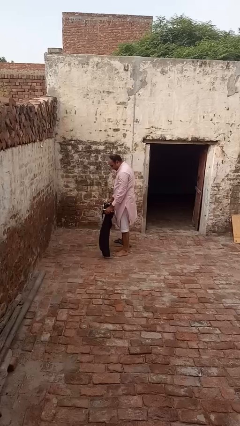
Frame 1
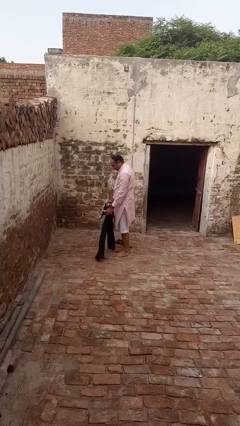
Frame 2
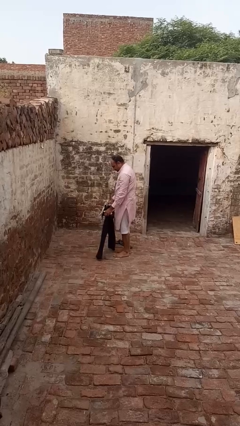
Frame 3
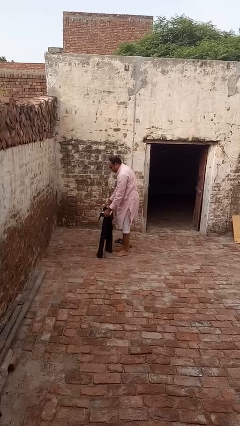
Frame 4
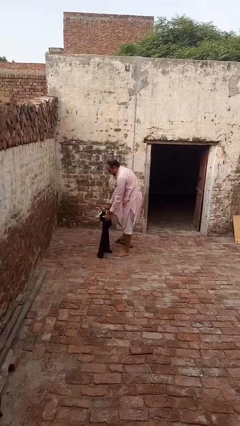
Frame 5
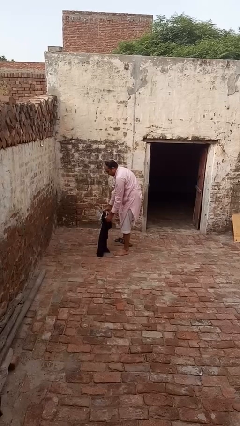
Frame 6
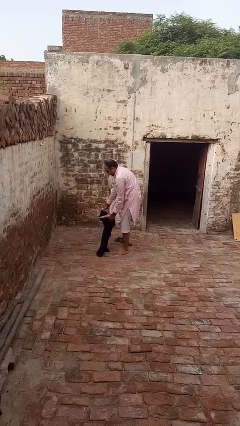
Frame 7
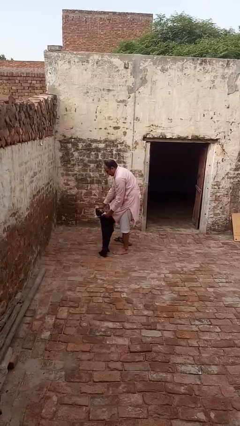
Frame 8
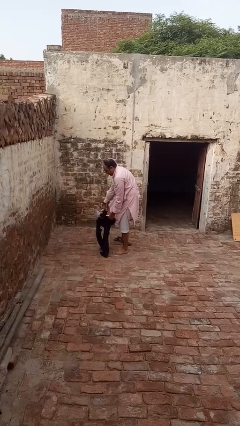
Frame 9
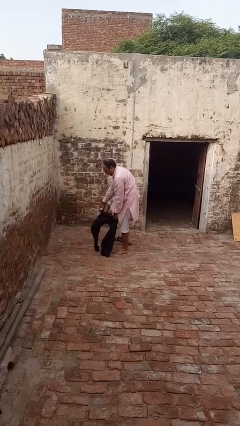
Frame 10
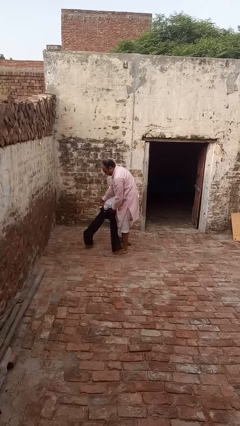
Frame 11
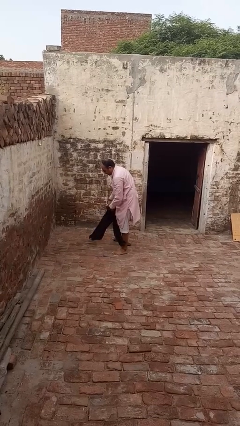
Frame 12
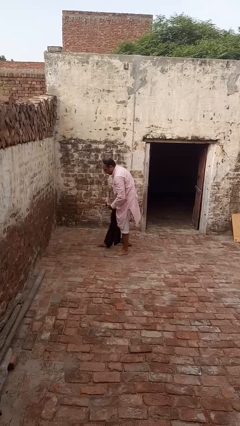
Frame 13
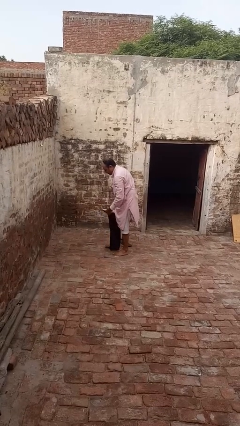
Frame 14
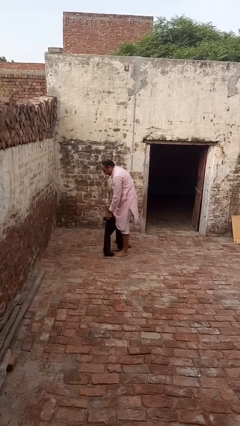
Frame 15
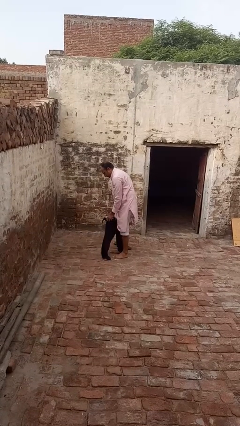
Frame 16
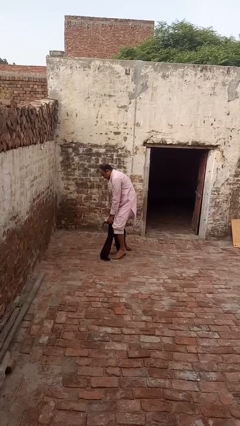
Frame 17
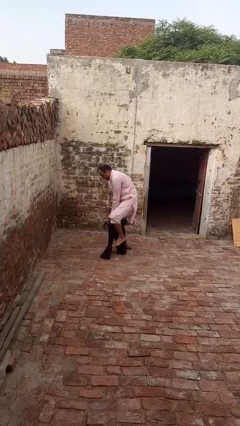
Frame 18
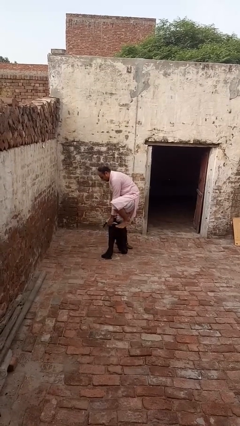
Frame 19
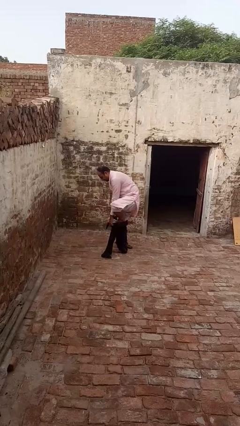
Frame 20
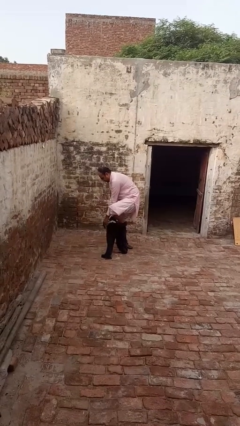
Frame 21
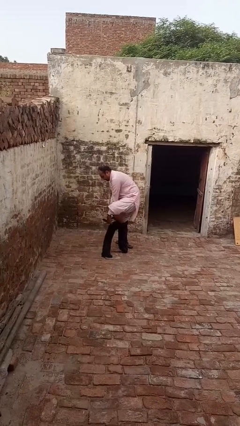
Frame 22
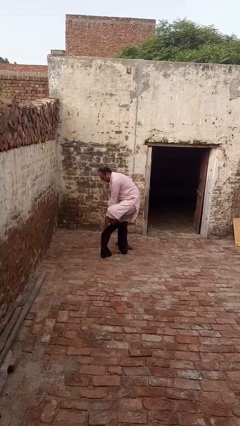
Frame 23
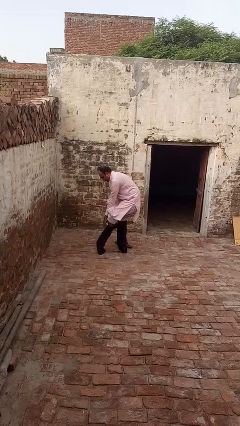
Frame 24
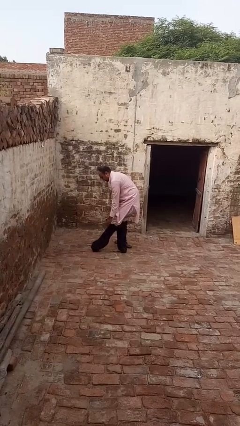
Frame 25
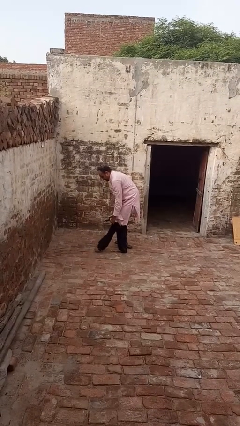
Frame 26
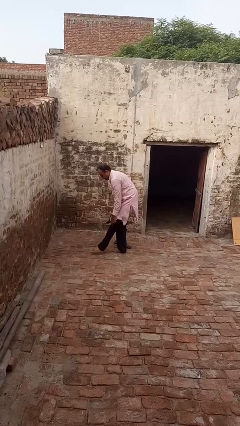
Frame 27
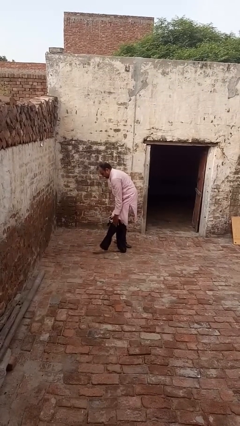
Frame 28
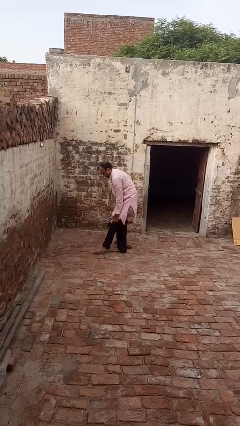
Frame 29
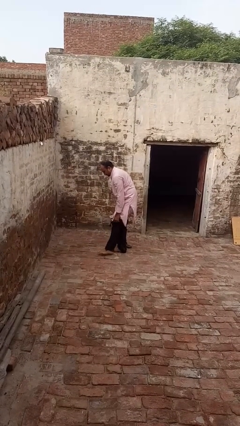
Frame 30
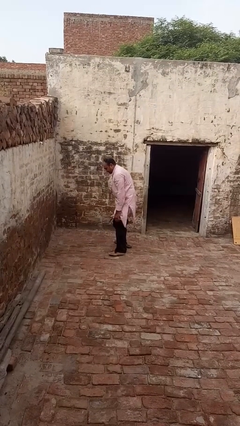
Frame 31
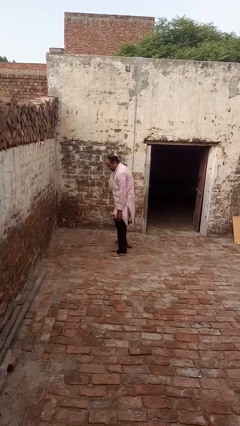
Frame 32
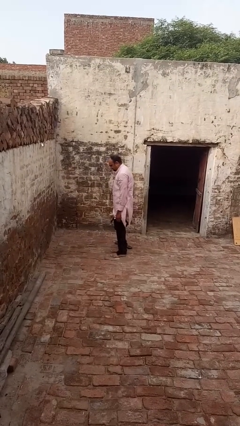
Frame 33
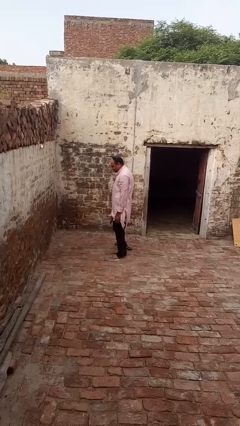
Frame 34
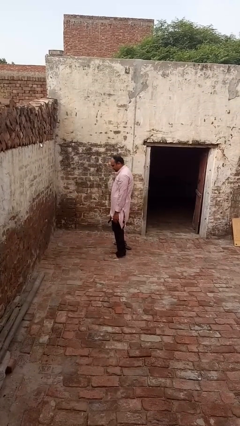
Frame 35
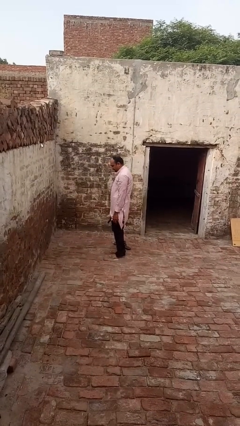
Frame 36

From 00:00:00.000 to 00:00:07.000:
person puts on pants

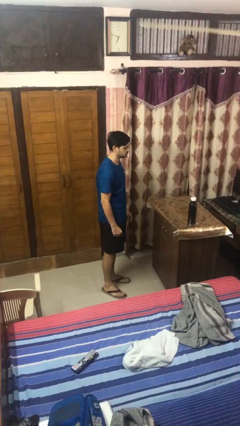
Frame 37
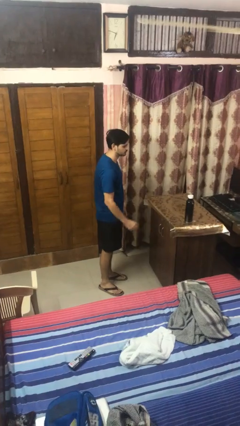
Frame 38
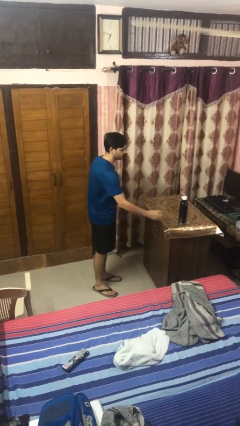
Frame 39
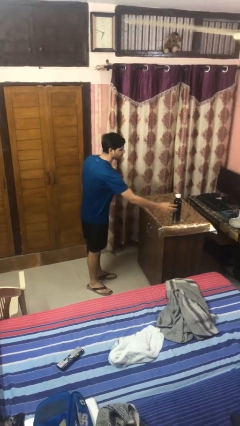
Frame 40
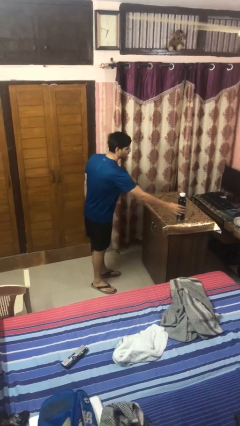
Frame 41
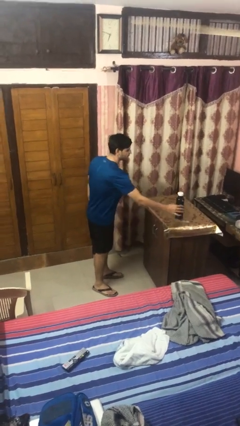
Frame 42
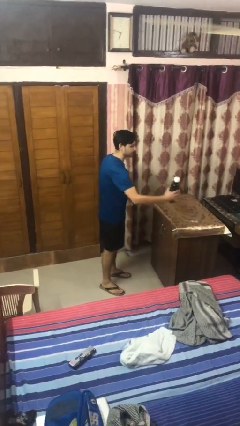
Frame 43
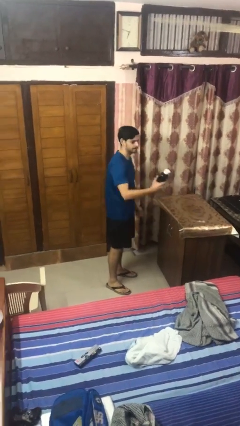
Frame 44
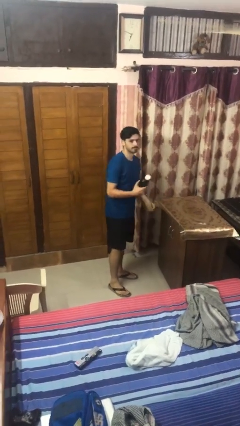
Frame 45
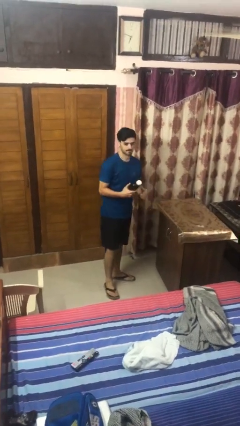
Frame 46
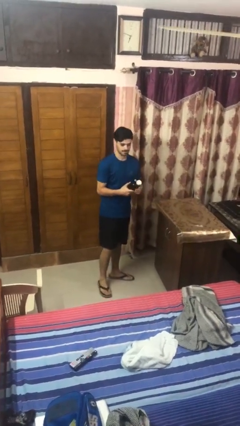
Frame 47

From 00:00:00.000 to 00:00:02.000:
person picks up object from countertop

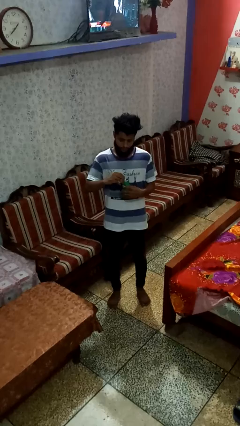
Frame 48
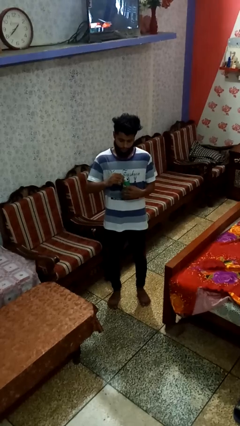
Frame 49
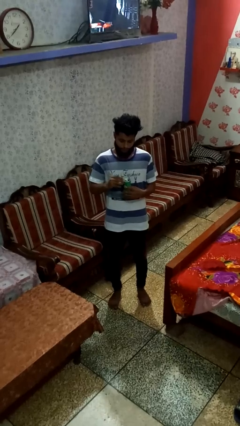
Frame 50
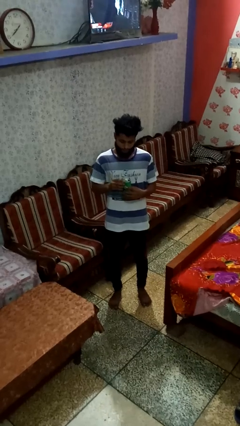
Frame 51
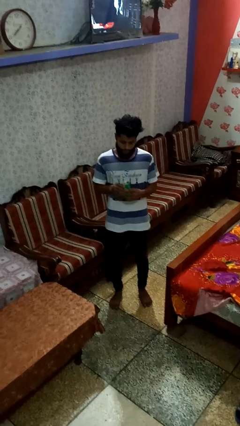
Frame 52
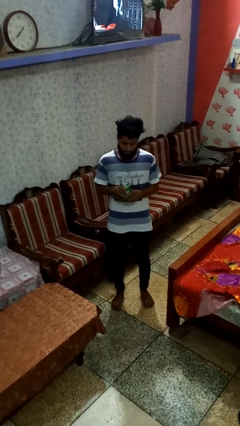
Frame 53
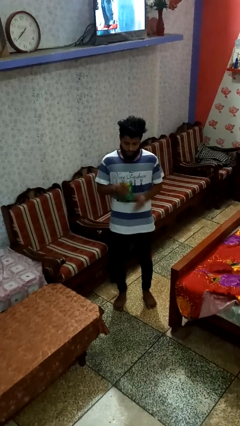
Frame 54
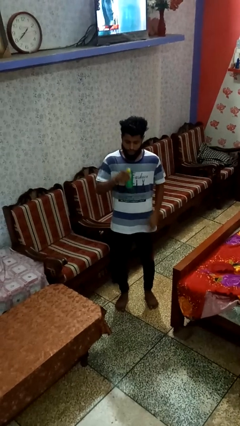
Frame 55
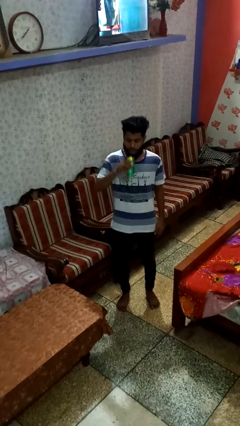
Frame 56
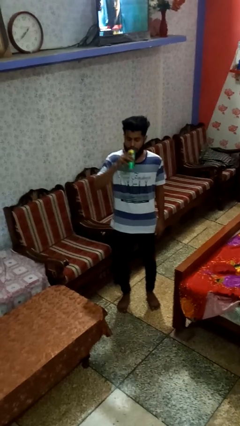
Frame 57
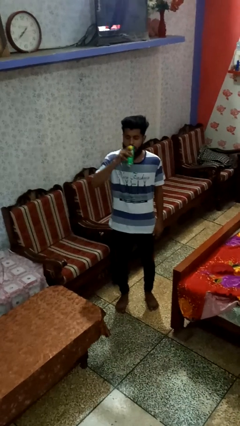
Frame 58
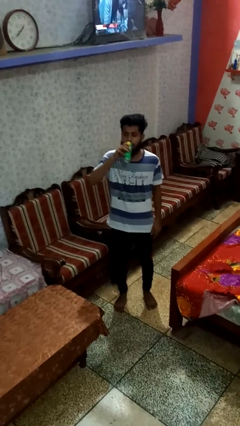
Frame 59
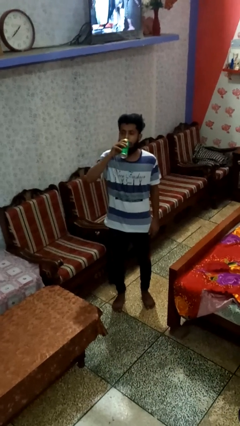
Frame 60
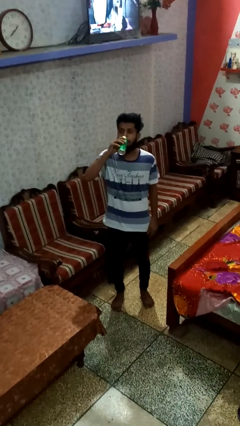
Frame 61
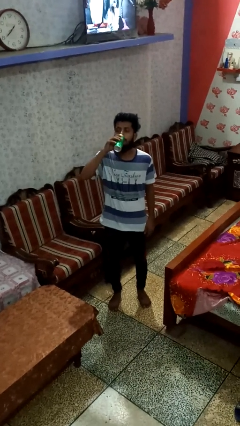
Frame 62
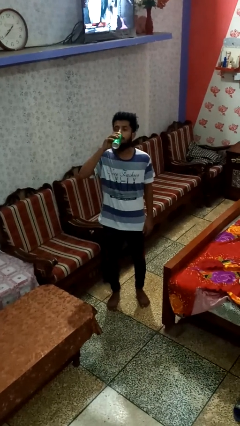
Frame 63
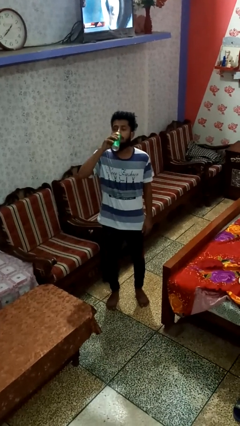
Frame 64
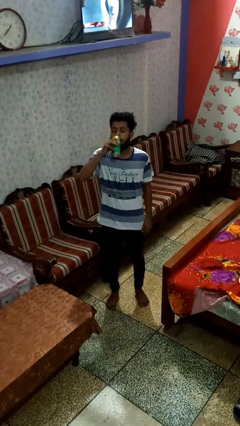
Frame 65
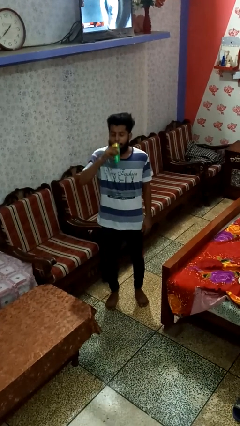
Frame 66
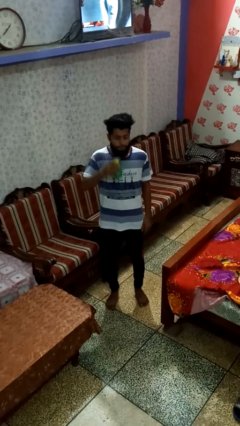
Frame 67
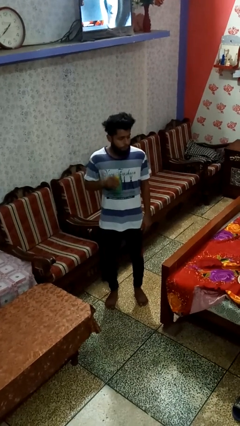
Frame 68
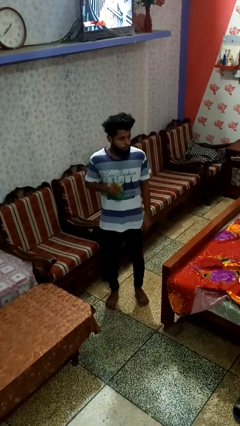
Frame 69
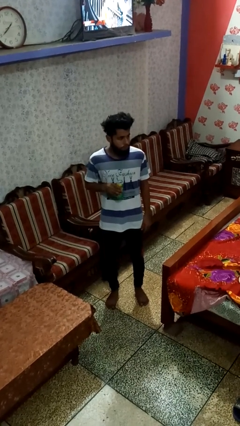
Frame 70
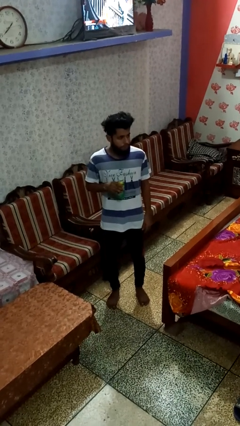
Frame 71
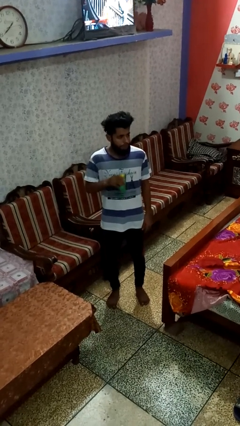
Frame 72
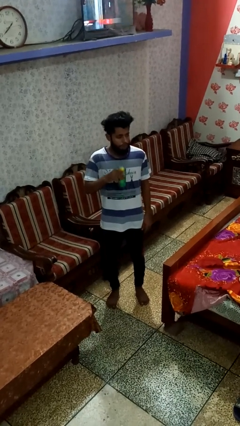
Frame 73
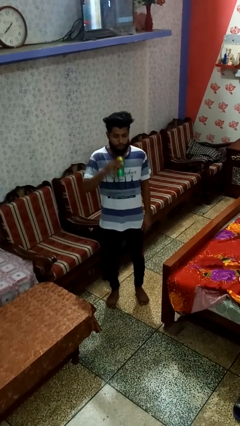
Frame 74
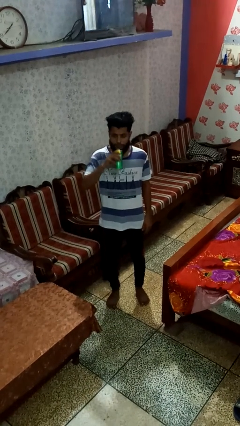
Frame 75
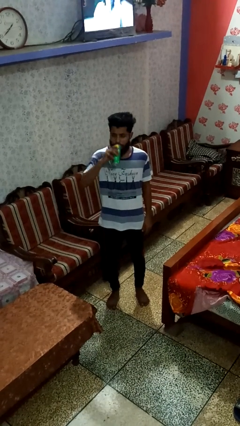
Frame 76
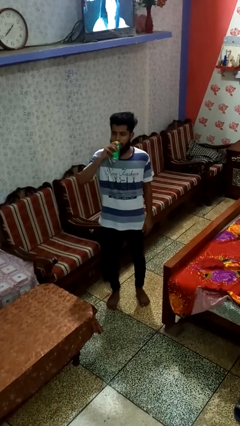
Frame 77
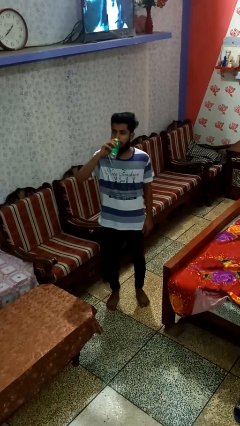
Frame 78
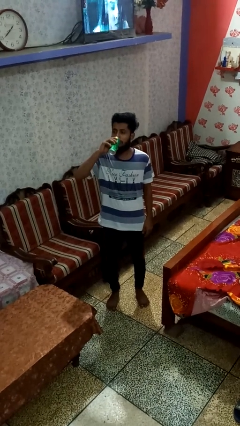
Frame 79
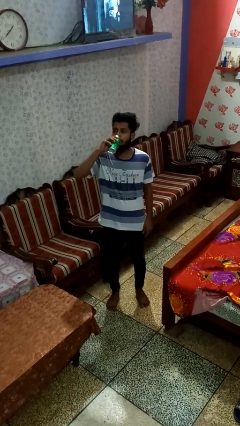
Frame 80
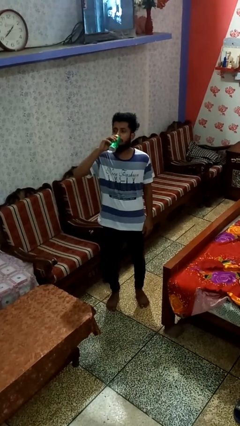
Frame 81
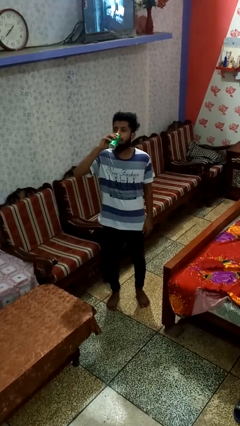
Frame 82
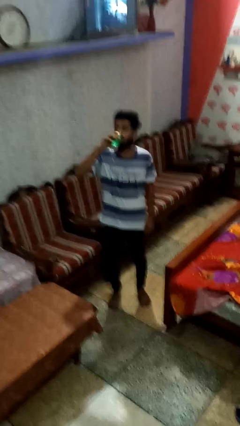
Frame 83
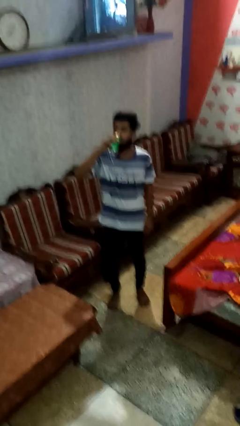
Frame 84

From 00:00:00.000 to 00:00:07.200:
person drinks from beverage can

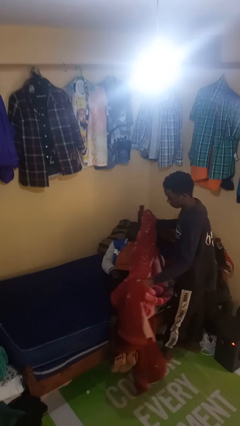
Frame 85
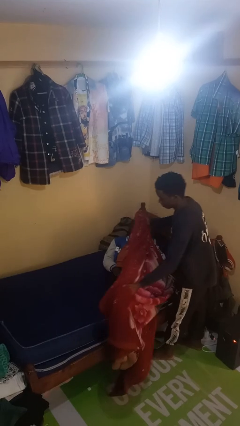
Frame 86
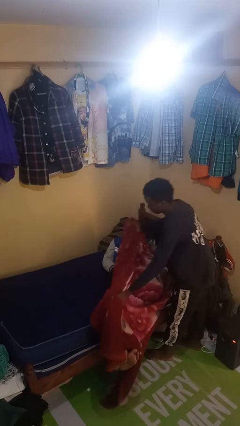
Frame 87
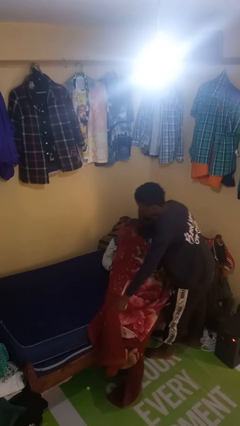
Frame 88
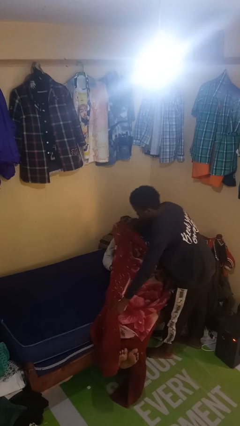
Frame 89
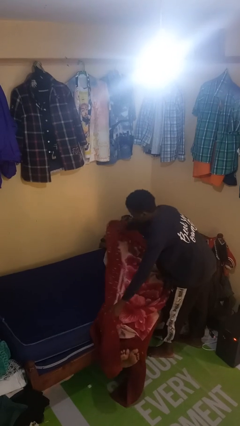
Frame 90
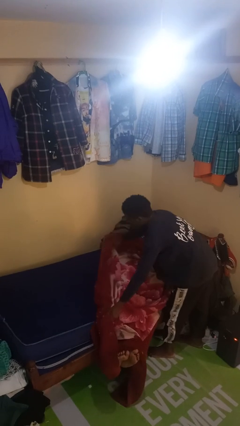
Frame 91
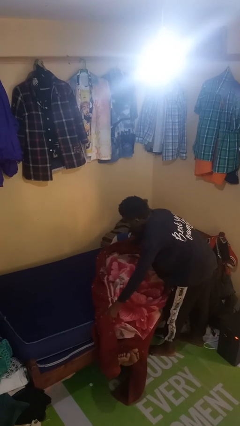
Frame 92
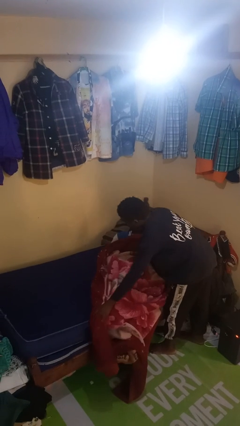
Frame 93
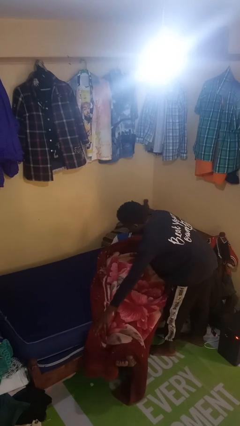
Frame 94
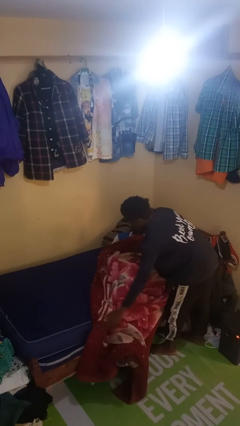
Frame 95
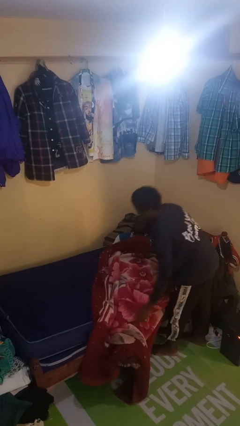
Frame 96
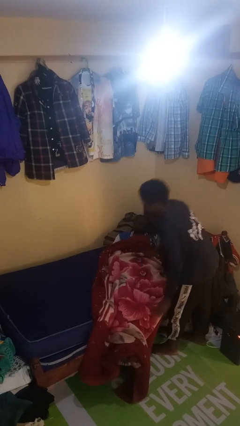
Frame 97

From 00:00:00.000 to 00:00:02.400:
person covers friend with blanket
